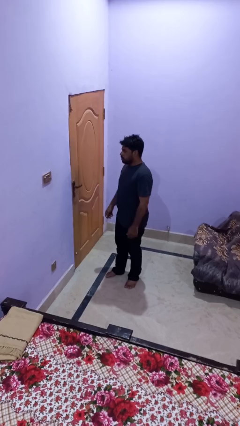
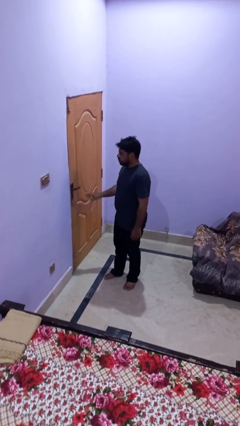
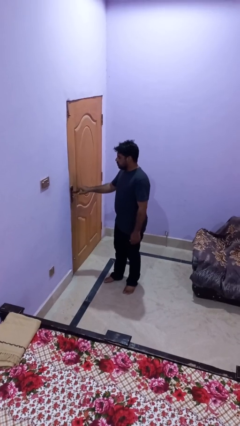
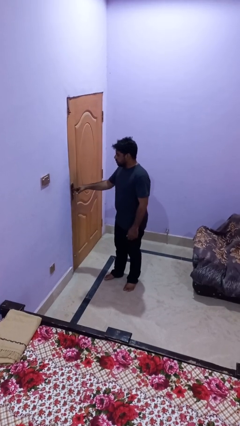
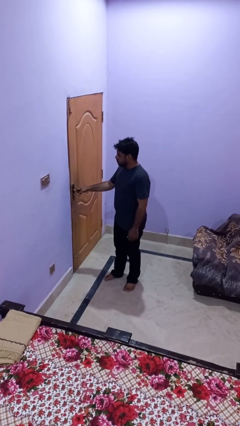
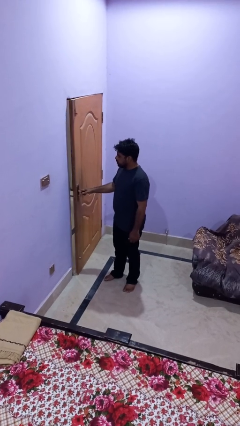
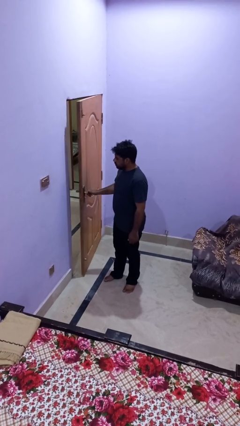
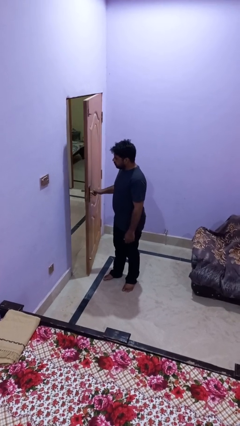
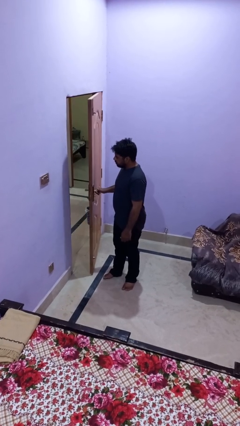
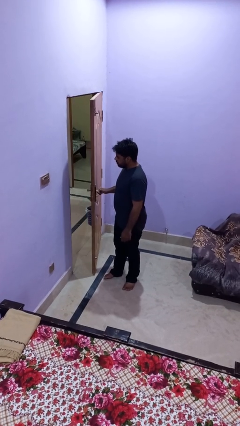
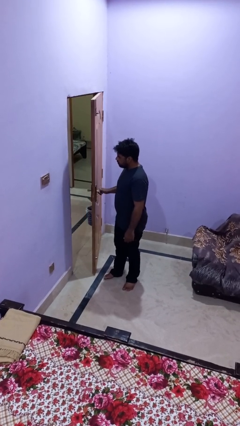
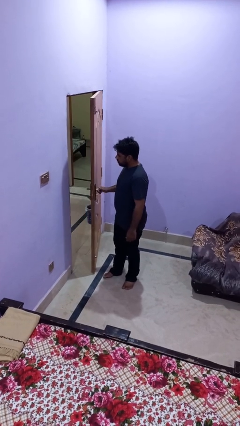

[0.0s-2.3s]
person opens facility door

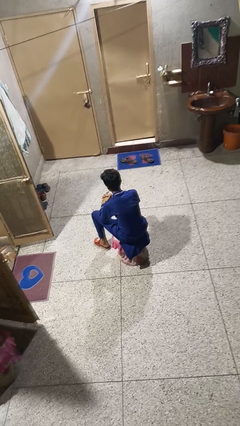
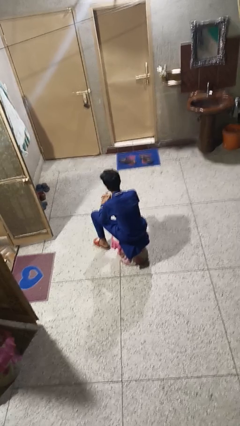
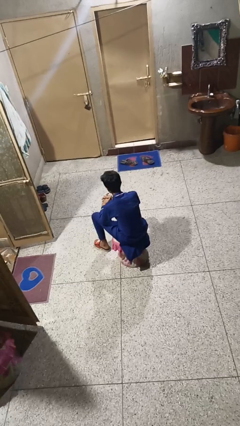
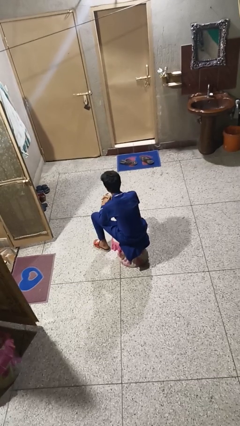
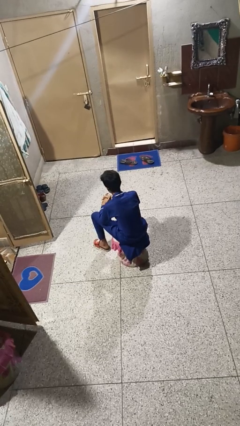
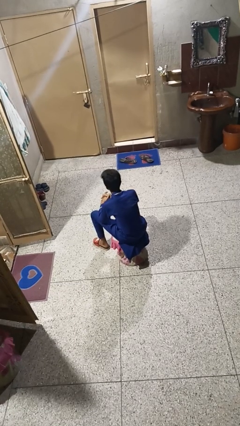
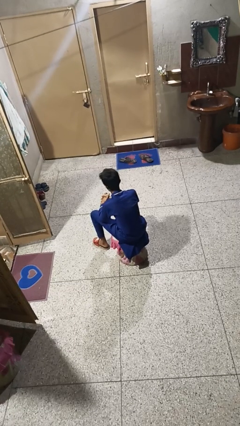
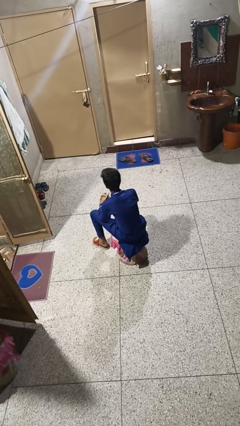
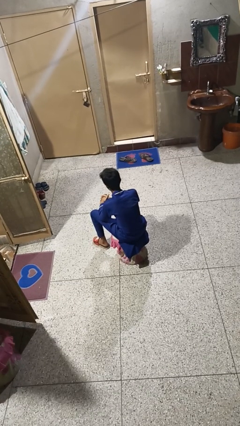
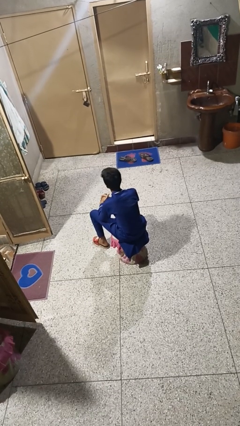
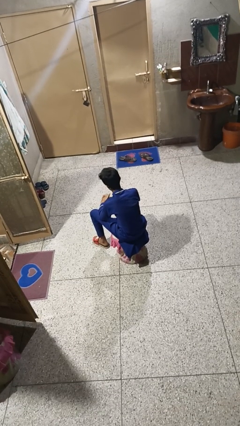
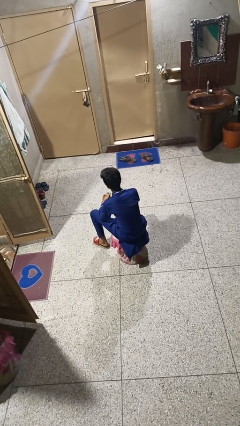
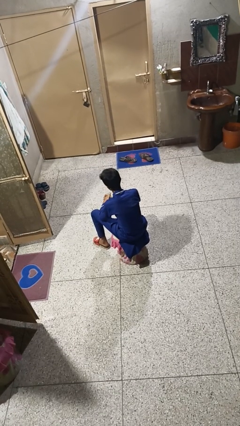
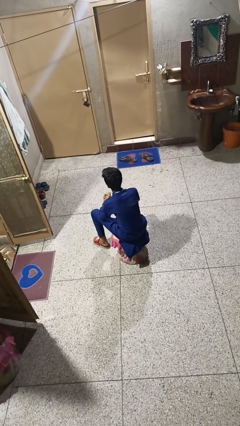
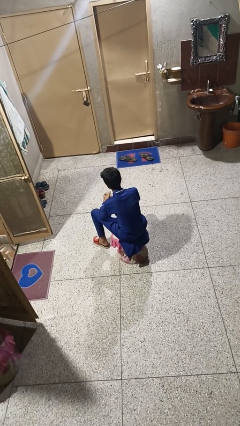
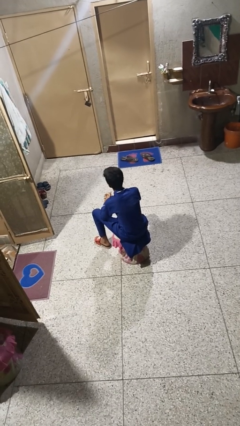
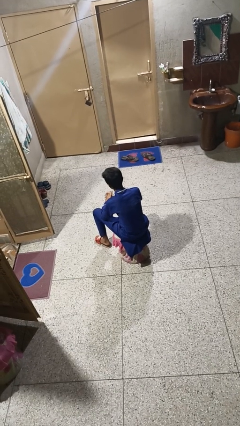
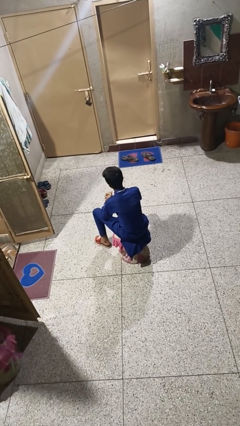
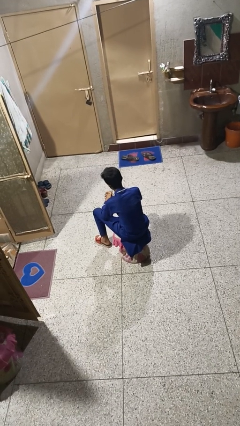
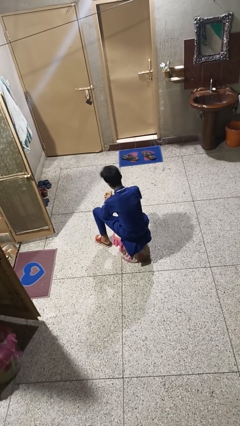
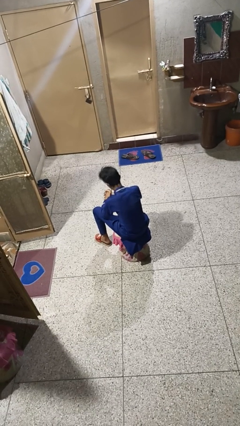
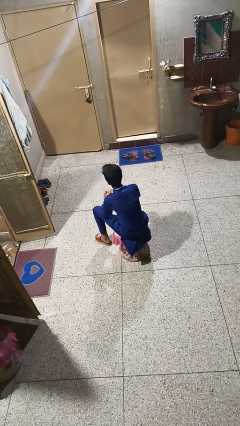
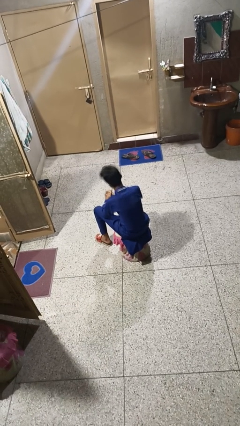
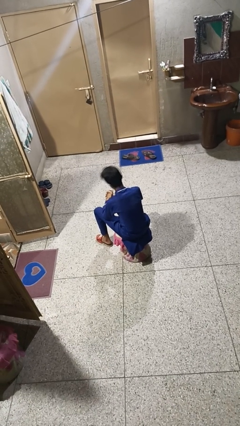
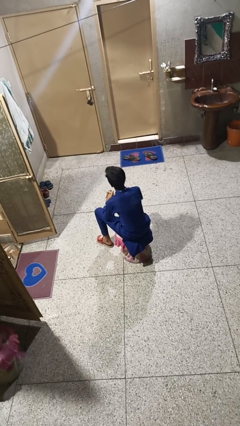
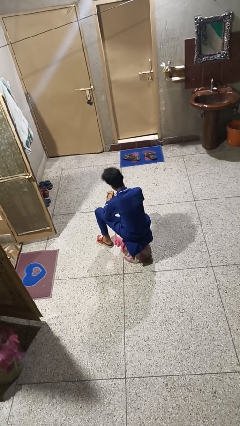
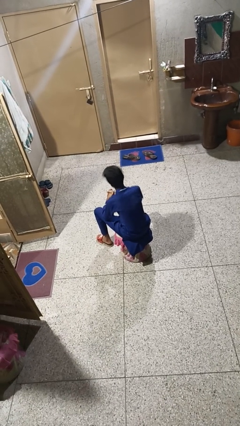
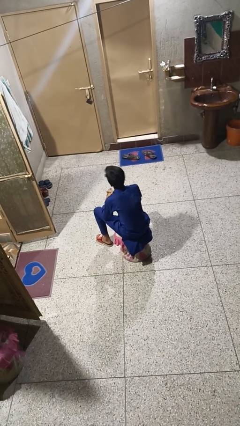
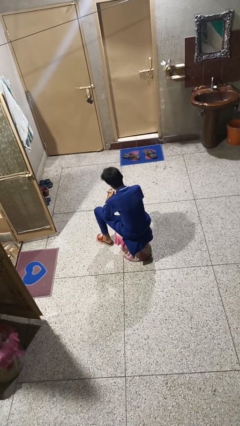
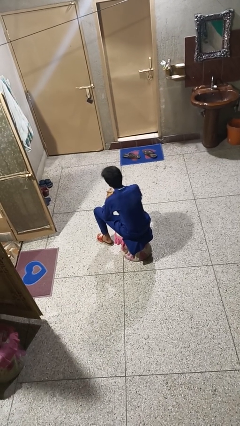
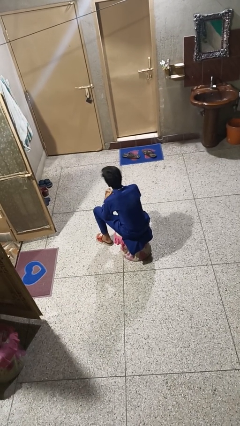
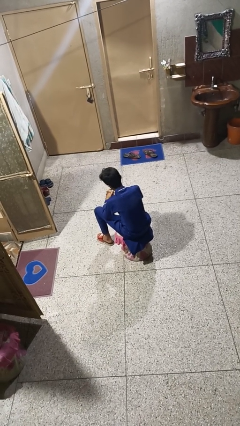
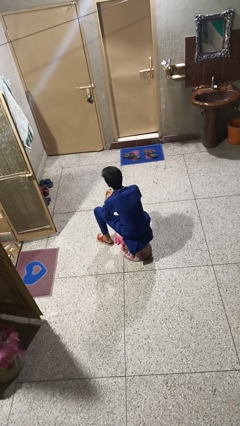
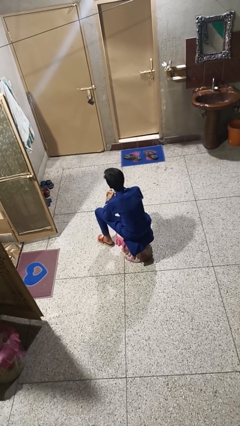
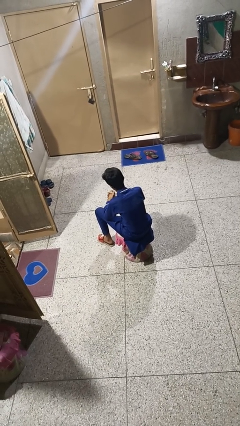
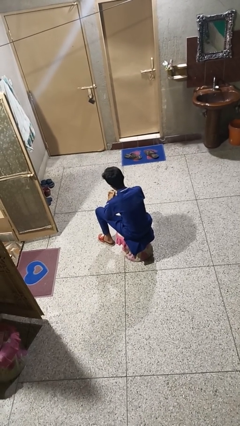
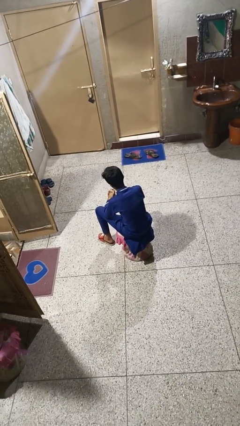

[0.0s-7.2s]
person nods head

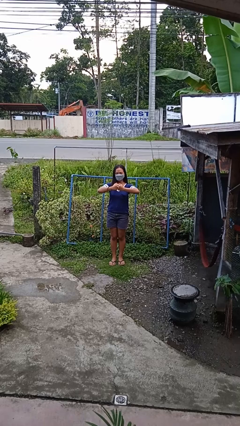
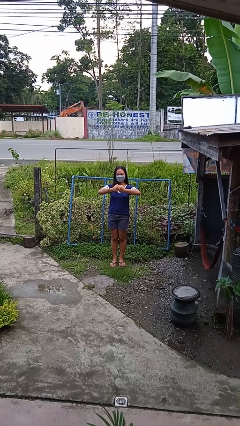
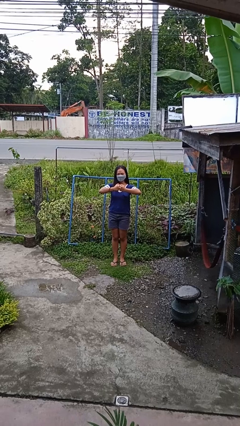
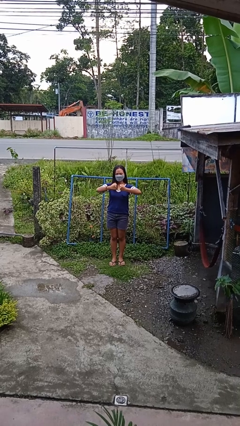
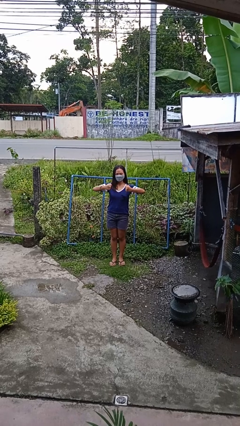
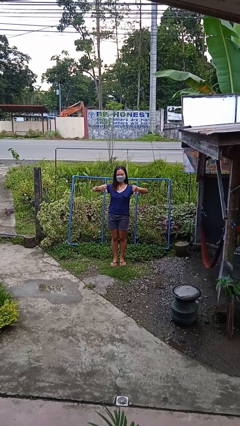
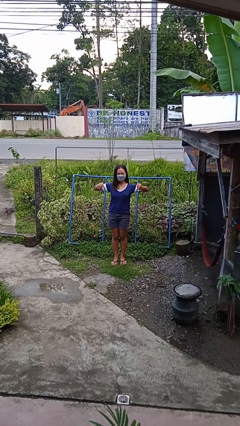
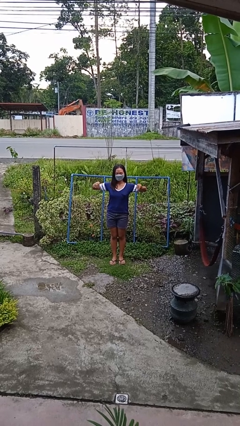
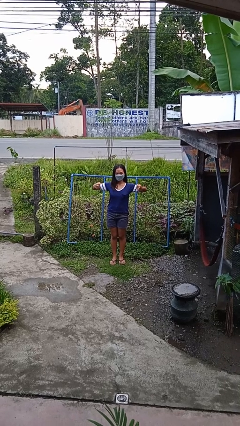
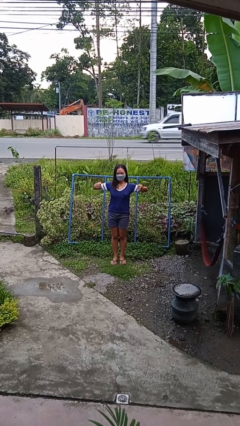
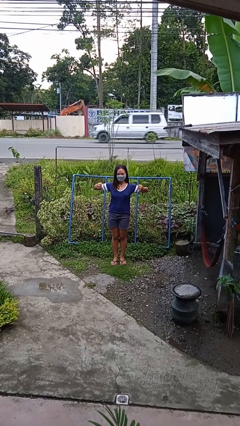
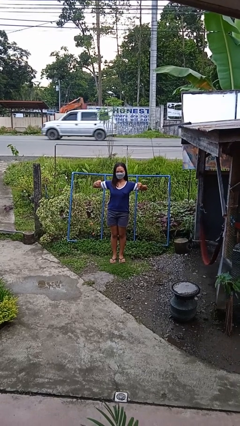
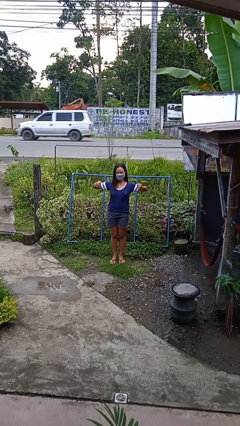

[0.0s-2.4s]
person gestures zoom in

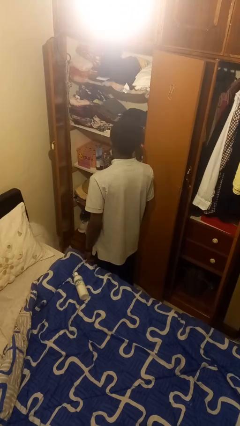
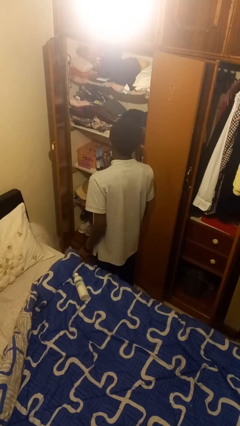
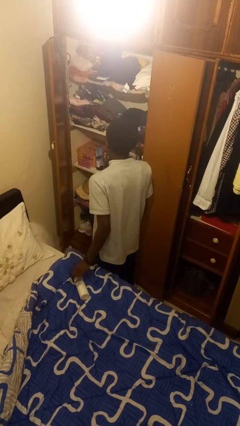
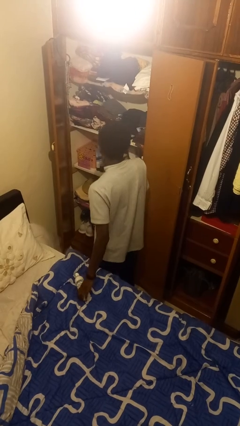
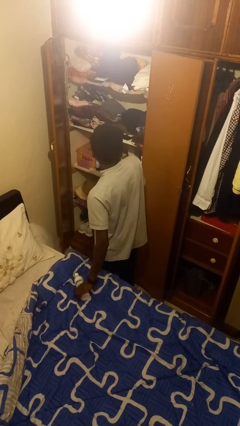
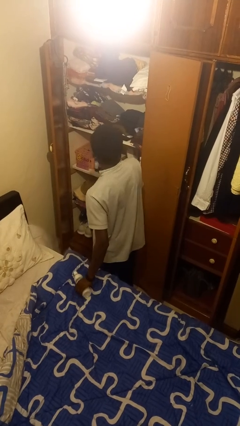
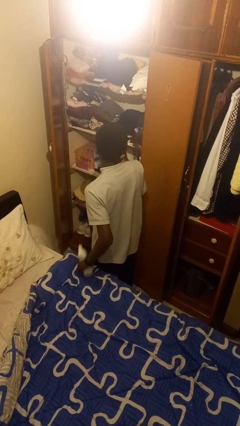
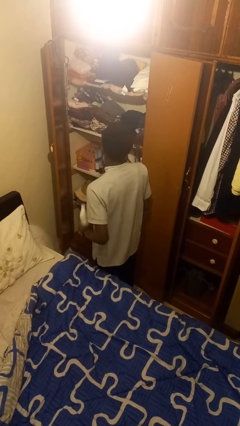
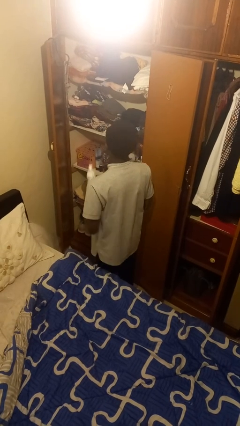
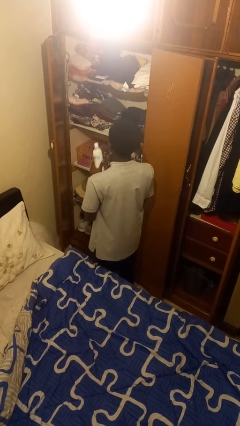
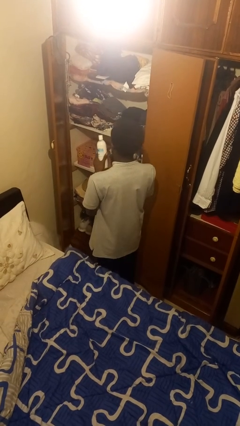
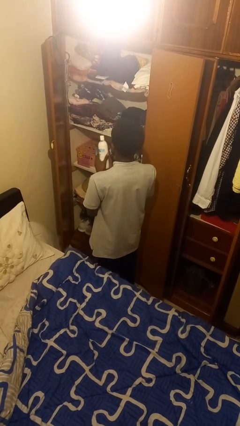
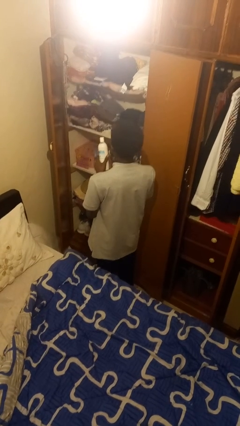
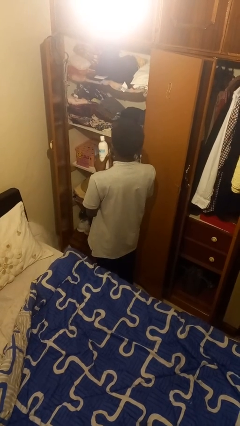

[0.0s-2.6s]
person picks up object from bed

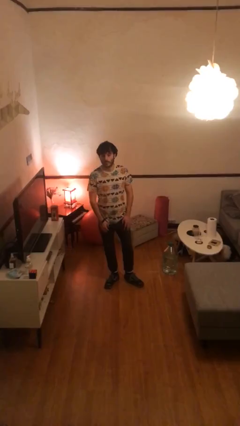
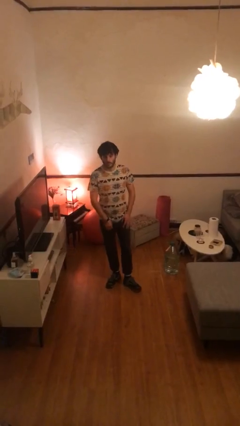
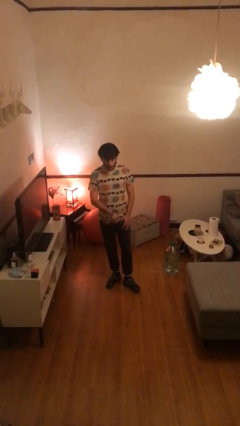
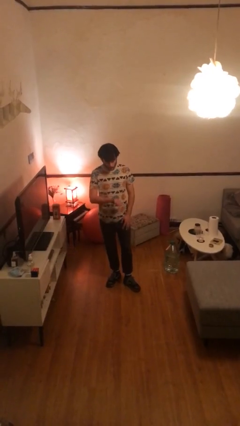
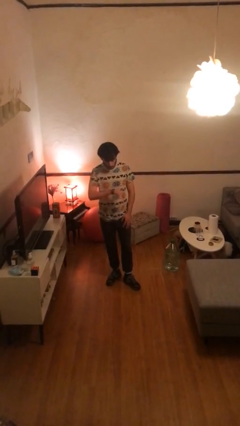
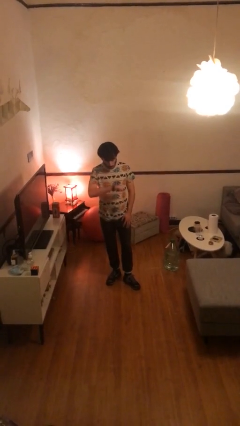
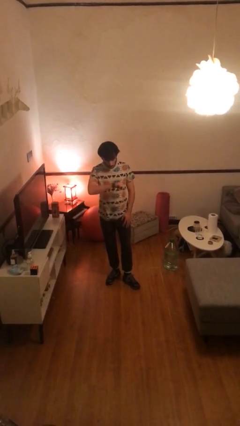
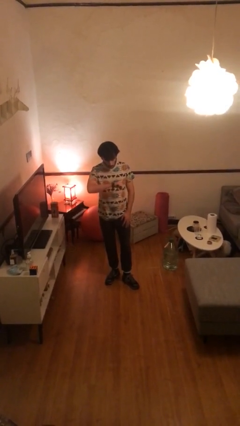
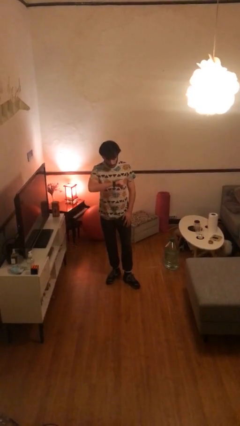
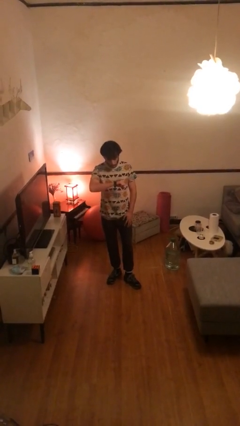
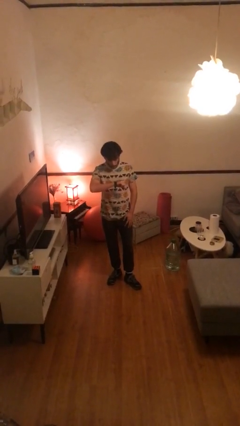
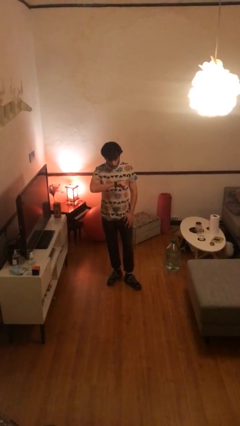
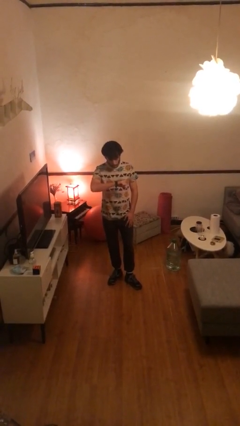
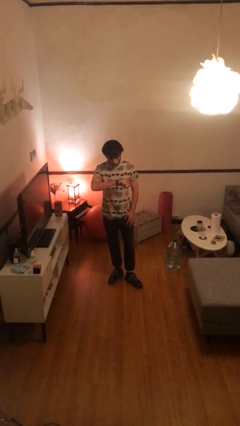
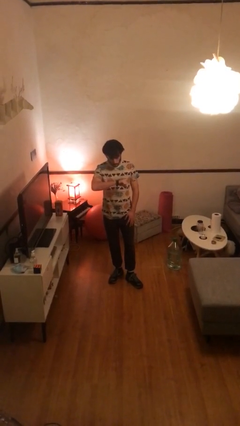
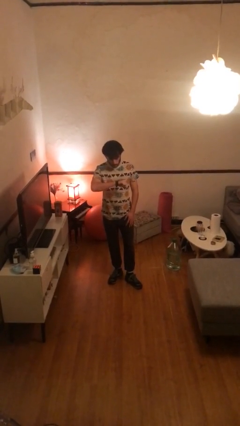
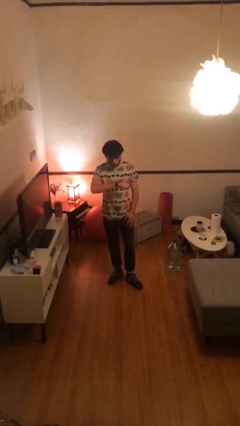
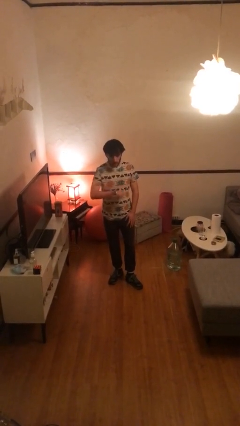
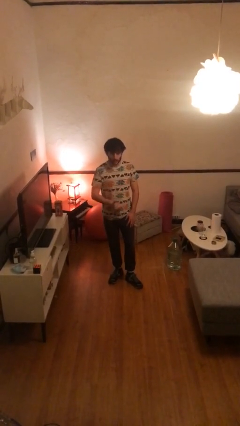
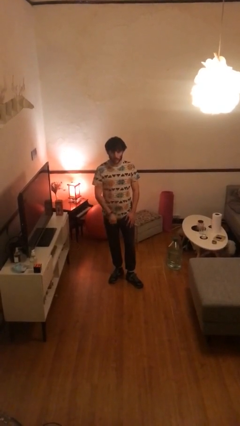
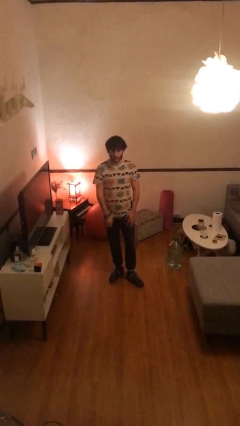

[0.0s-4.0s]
person looks at wristwatch
